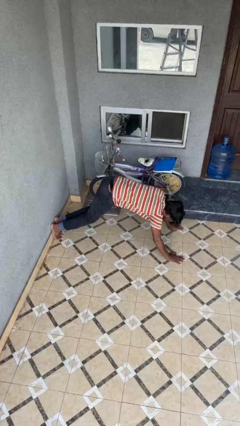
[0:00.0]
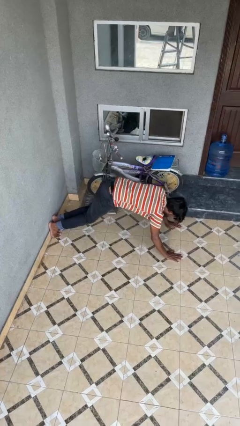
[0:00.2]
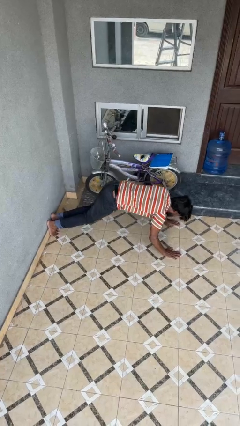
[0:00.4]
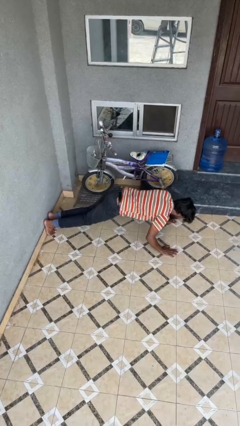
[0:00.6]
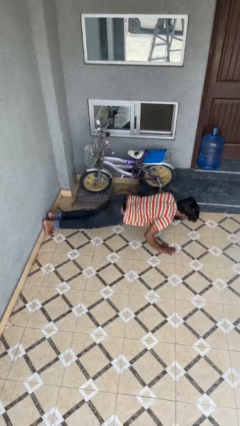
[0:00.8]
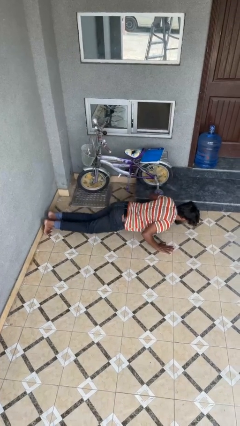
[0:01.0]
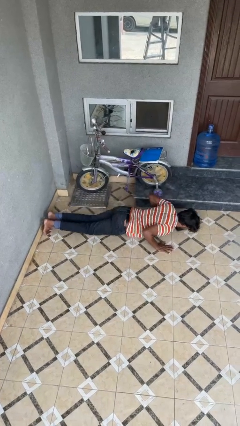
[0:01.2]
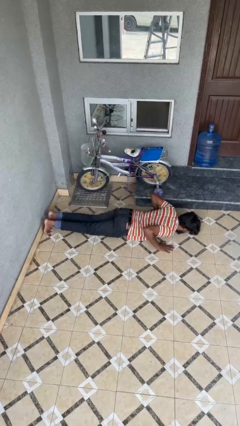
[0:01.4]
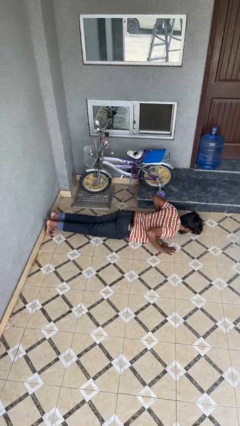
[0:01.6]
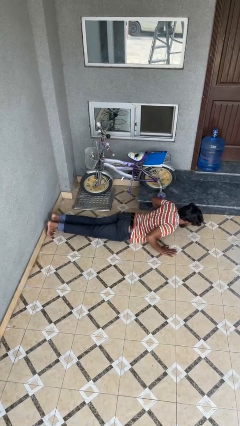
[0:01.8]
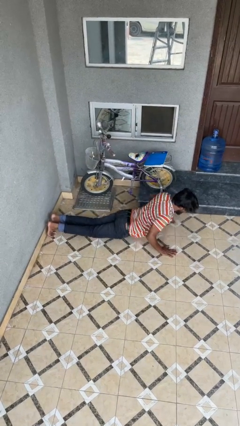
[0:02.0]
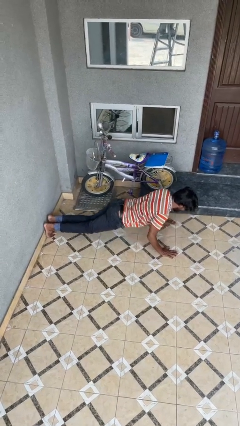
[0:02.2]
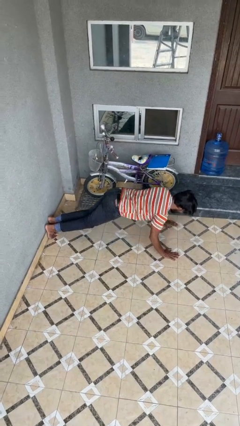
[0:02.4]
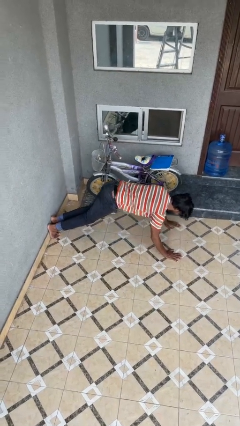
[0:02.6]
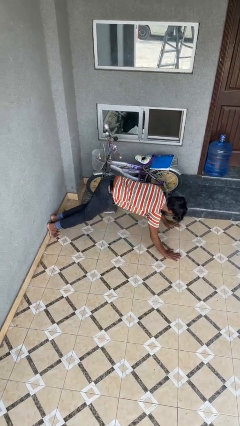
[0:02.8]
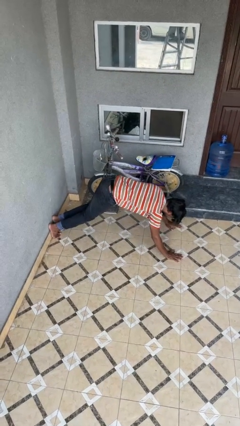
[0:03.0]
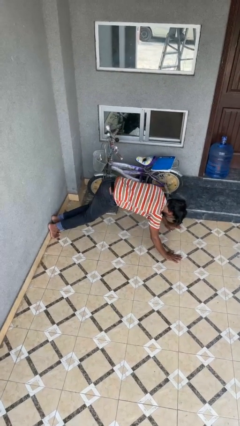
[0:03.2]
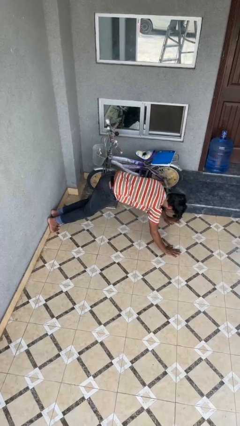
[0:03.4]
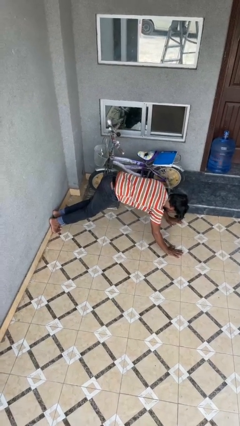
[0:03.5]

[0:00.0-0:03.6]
person exercises with pushup

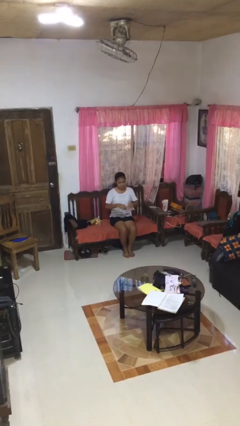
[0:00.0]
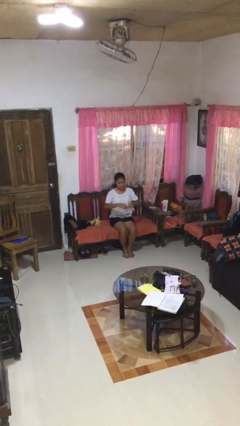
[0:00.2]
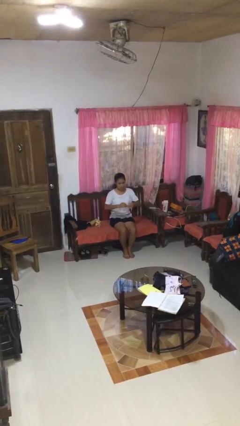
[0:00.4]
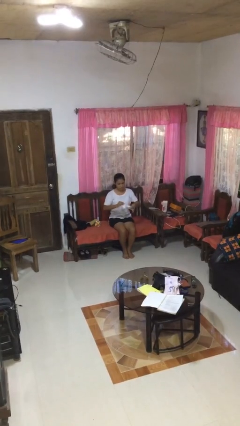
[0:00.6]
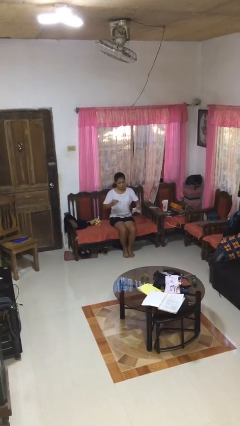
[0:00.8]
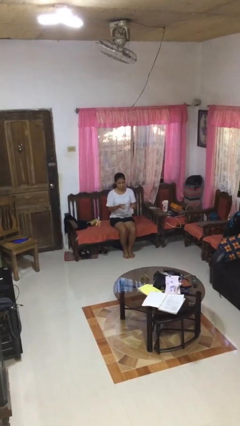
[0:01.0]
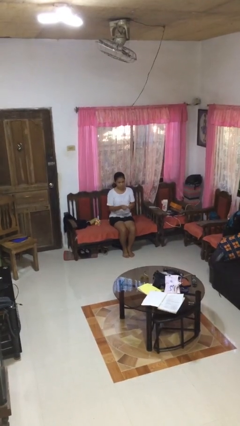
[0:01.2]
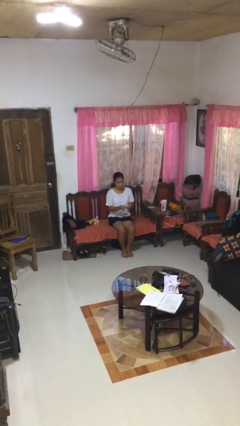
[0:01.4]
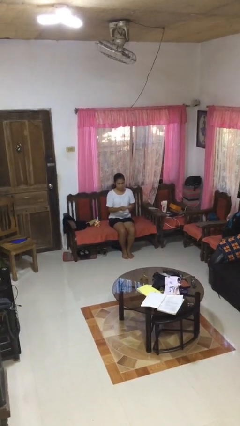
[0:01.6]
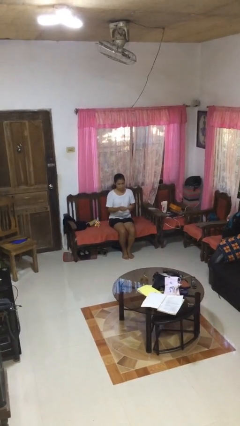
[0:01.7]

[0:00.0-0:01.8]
person tears paper

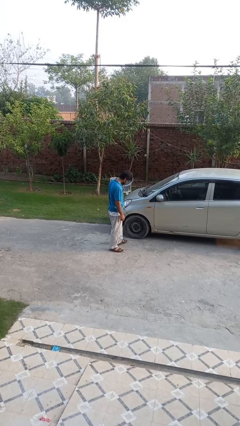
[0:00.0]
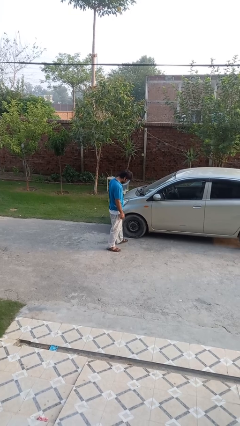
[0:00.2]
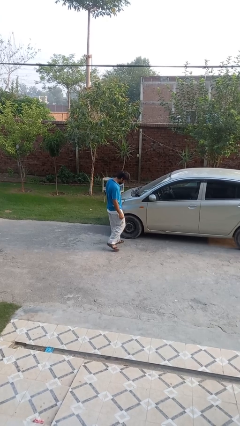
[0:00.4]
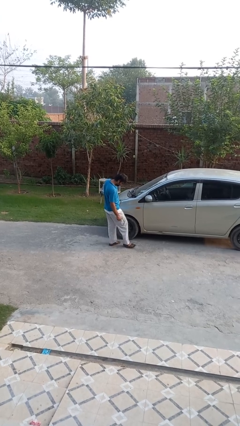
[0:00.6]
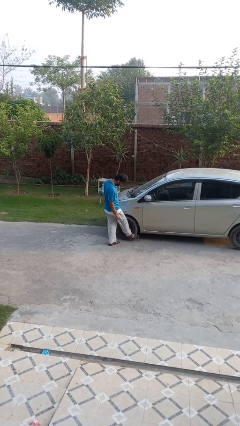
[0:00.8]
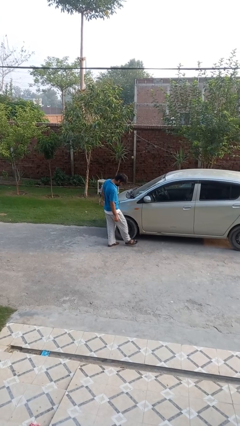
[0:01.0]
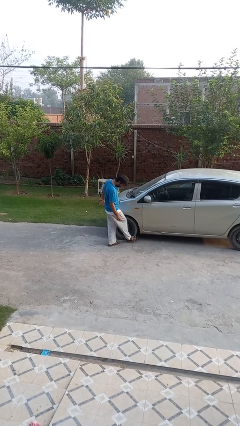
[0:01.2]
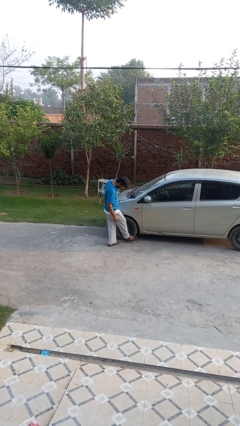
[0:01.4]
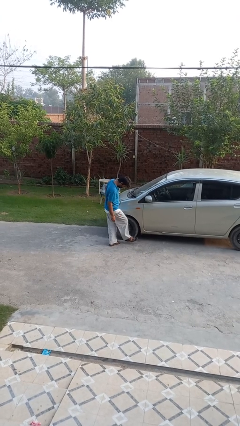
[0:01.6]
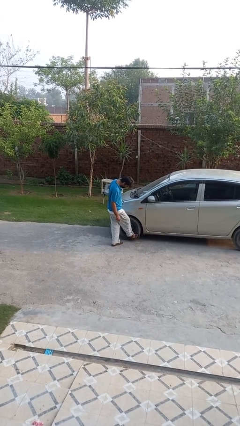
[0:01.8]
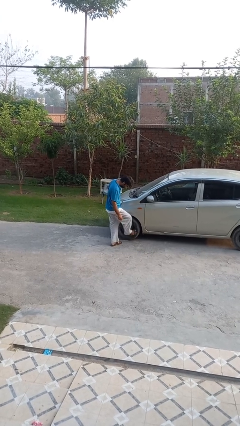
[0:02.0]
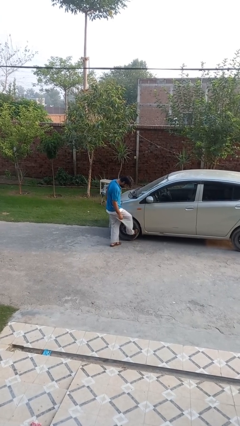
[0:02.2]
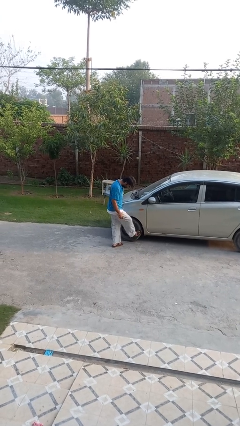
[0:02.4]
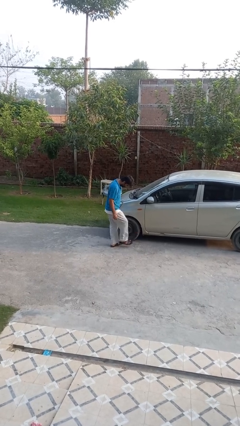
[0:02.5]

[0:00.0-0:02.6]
person kicks car tires

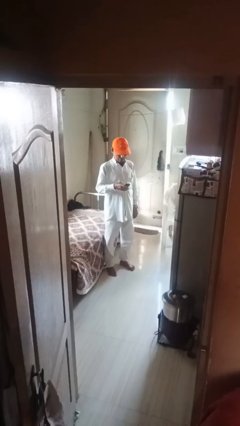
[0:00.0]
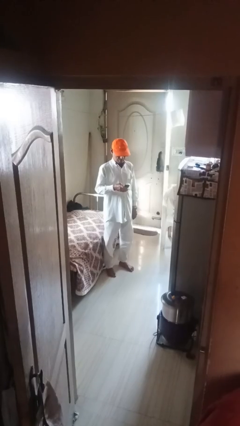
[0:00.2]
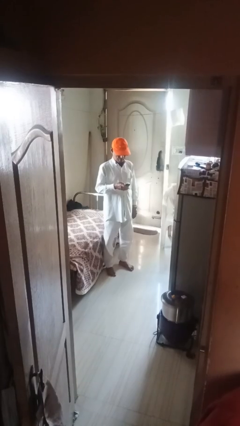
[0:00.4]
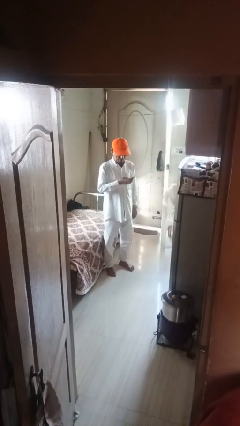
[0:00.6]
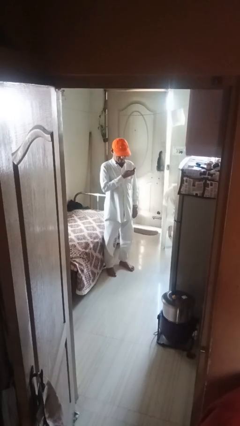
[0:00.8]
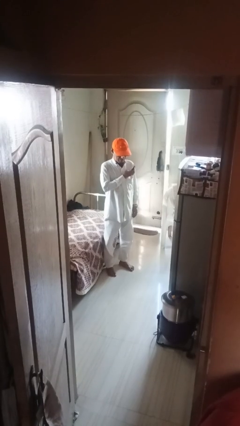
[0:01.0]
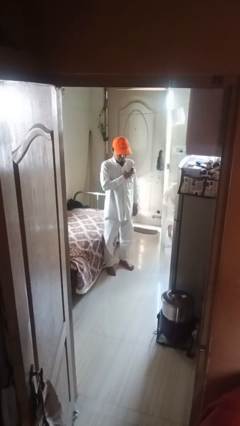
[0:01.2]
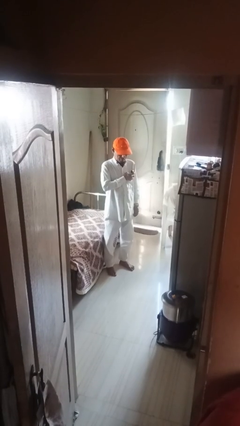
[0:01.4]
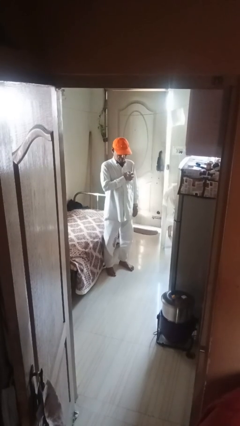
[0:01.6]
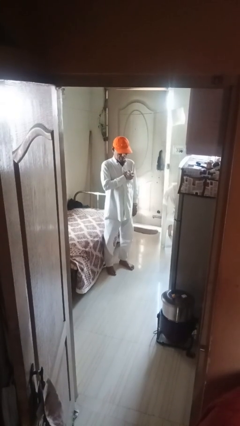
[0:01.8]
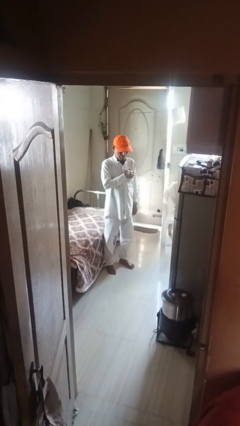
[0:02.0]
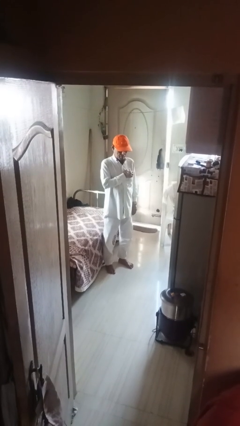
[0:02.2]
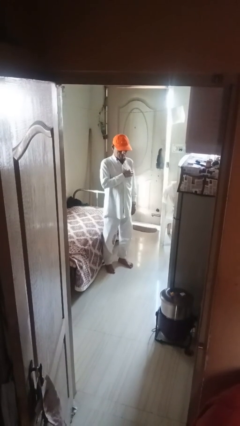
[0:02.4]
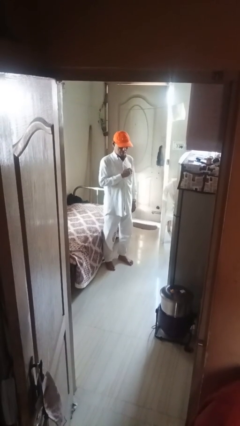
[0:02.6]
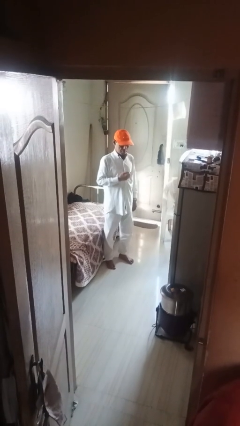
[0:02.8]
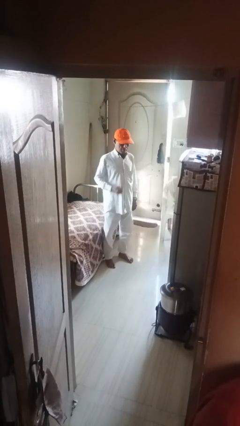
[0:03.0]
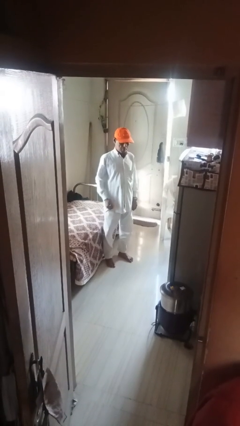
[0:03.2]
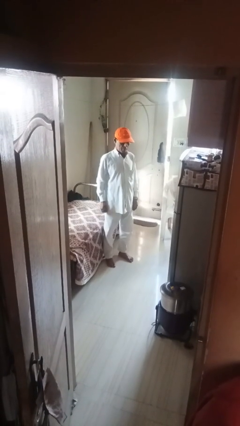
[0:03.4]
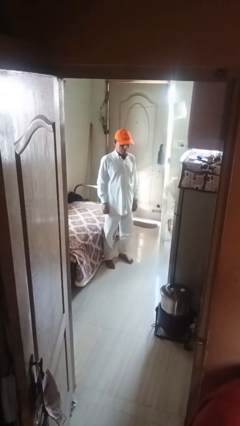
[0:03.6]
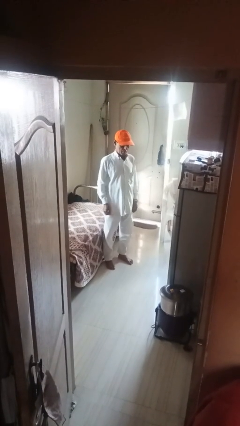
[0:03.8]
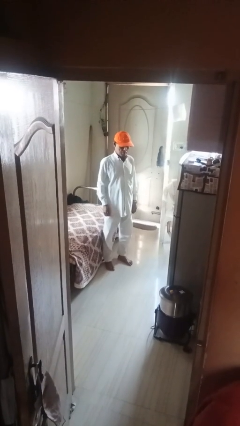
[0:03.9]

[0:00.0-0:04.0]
person puts phone into pocket

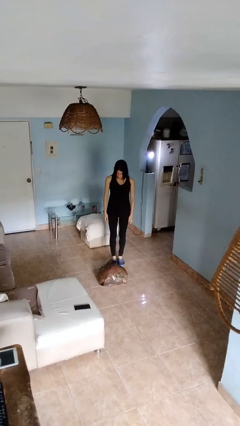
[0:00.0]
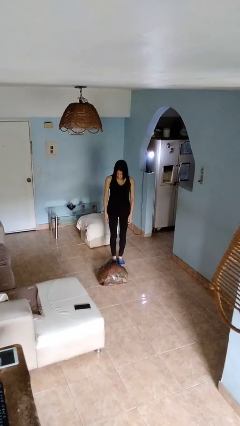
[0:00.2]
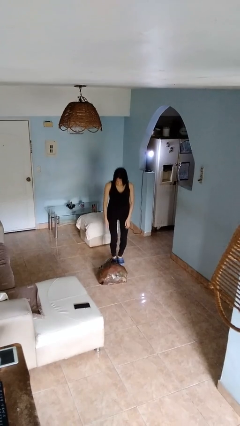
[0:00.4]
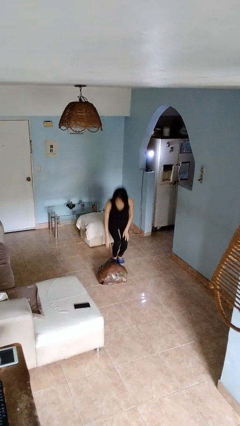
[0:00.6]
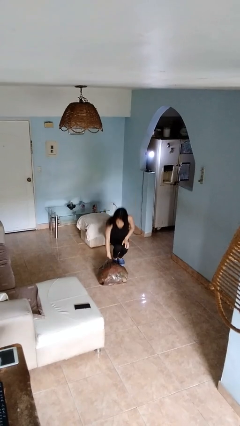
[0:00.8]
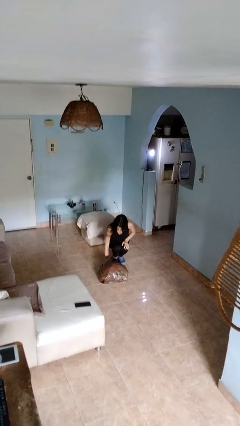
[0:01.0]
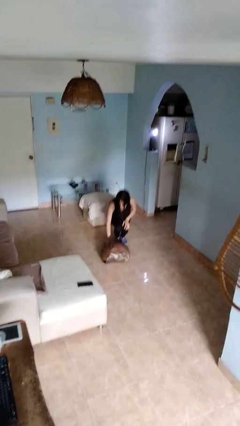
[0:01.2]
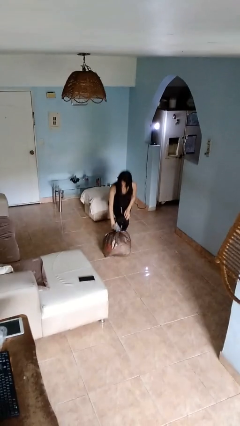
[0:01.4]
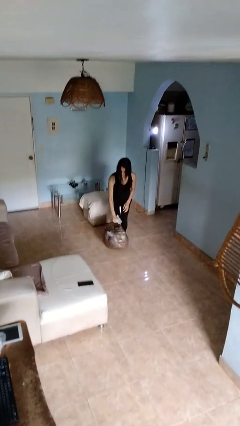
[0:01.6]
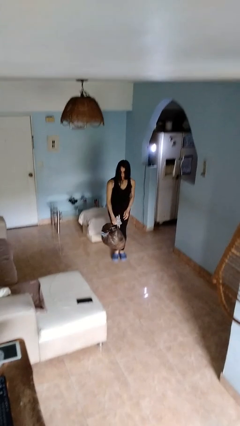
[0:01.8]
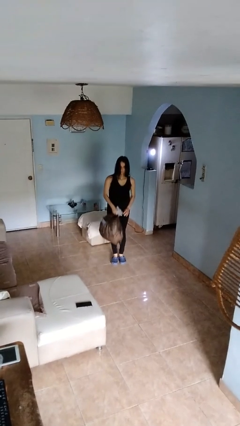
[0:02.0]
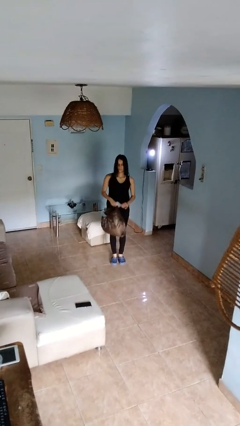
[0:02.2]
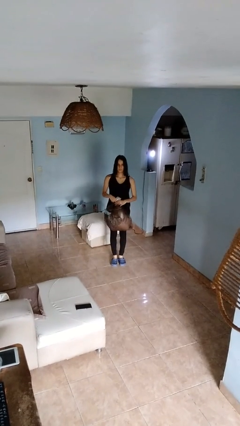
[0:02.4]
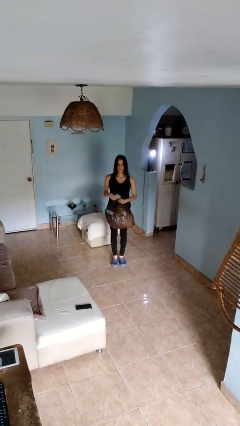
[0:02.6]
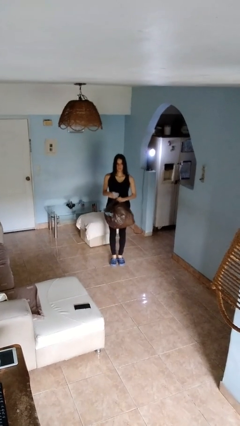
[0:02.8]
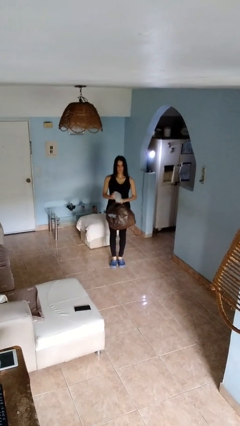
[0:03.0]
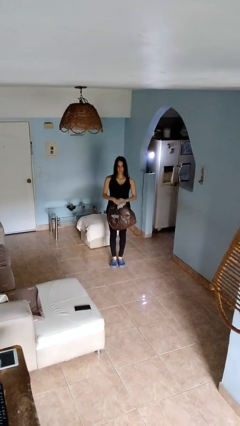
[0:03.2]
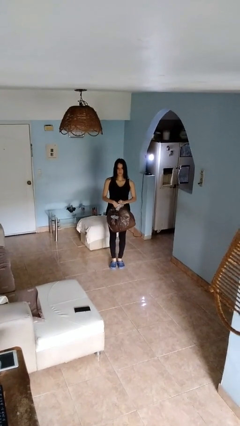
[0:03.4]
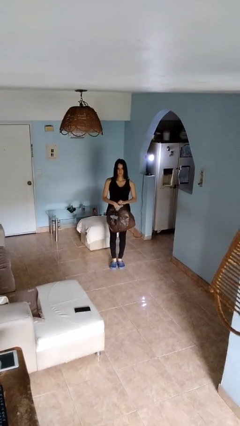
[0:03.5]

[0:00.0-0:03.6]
person picks up object from floor

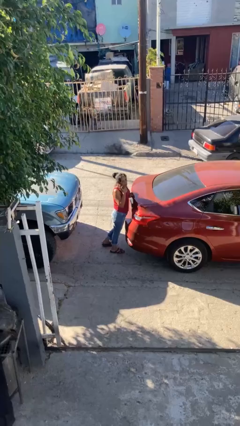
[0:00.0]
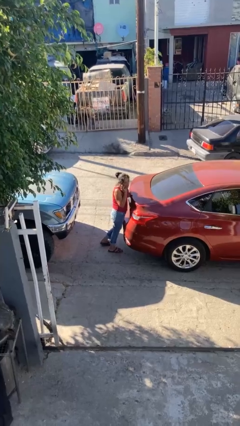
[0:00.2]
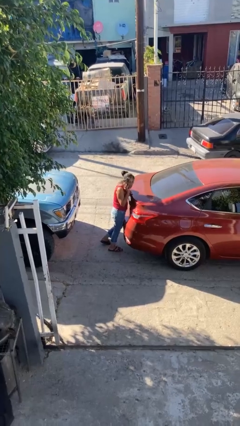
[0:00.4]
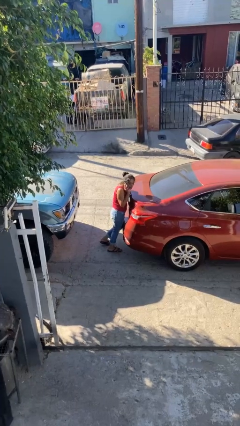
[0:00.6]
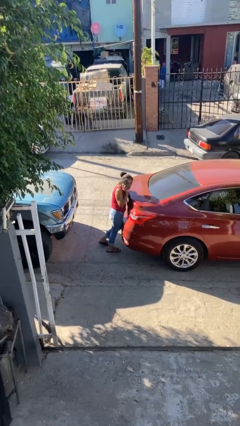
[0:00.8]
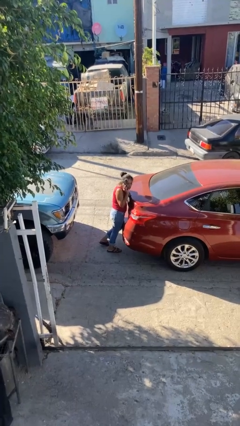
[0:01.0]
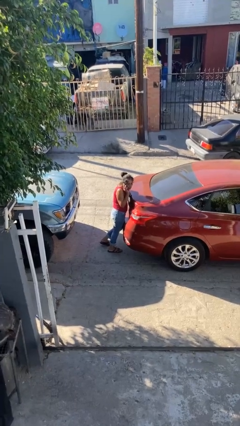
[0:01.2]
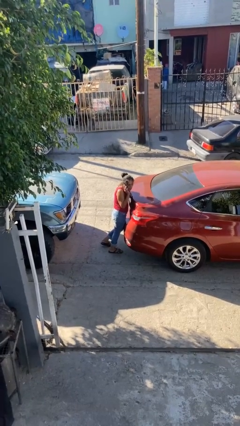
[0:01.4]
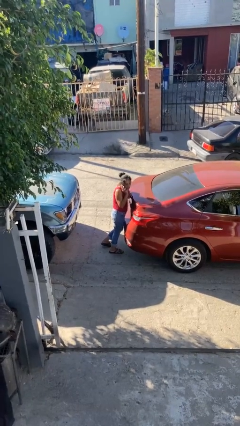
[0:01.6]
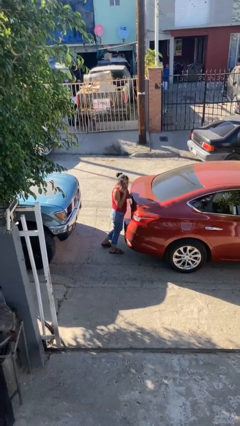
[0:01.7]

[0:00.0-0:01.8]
person leans against car
